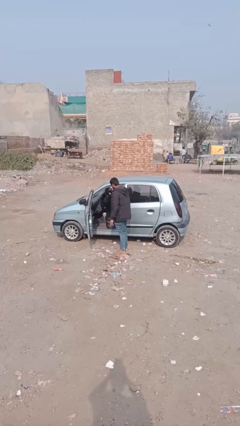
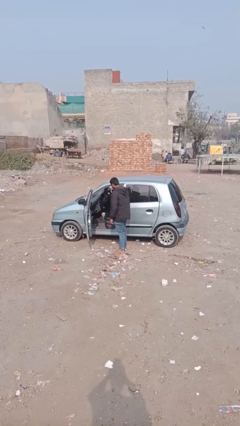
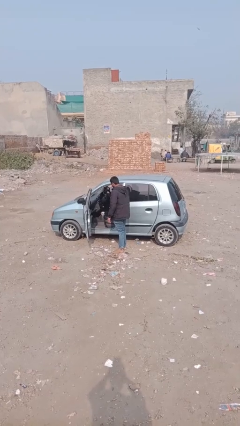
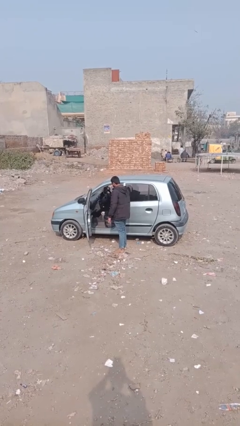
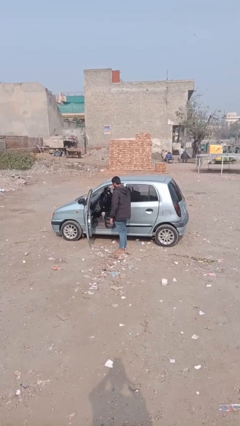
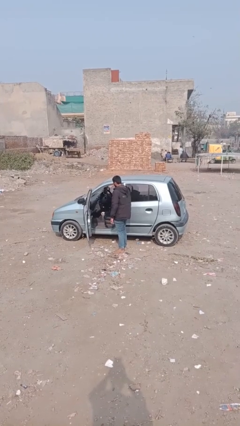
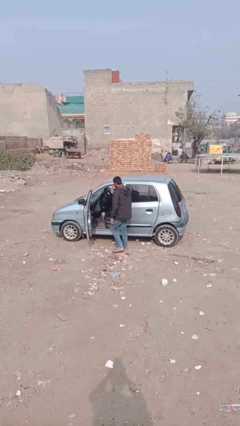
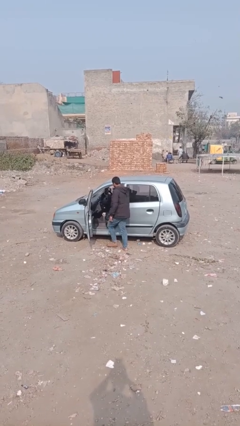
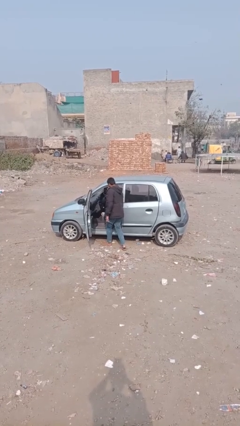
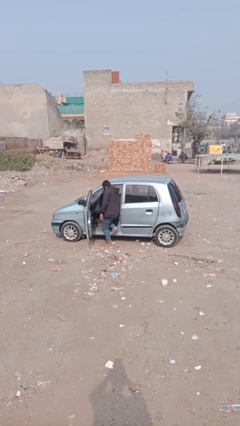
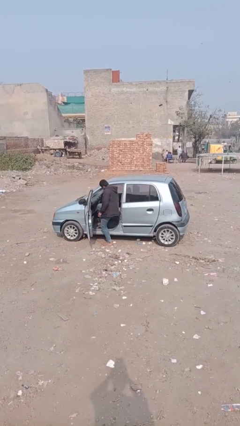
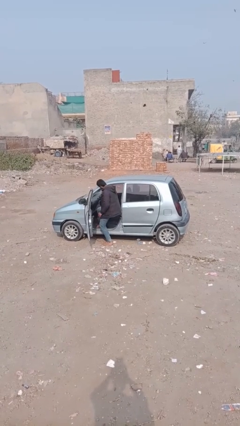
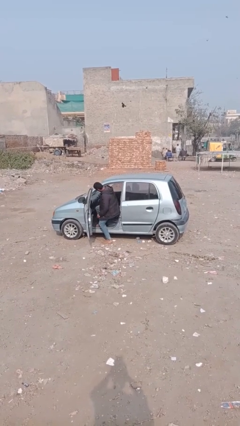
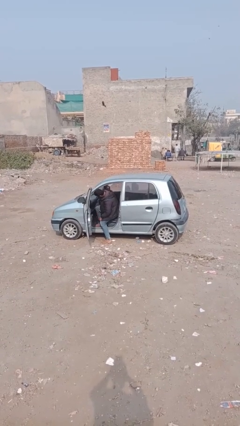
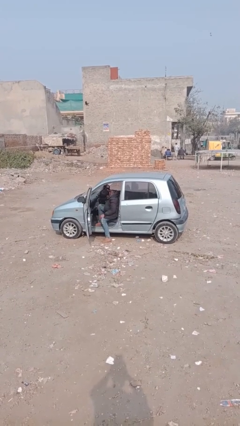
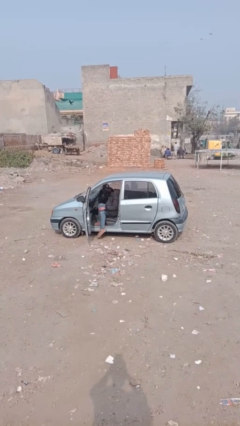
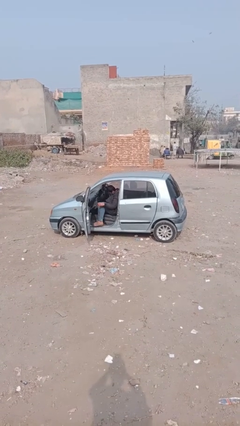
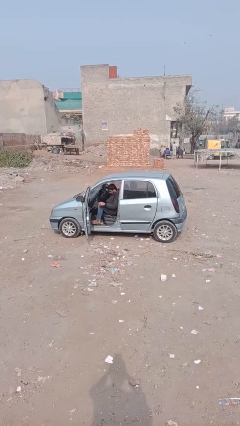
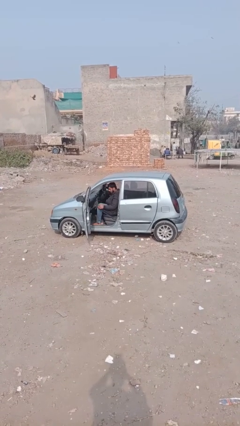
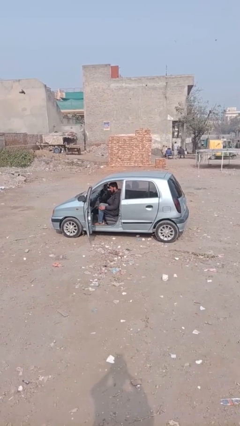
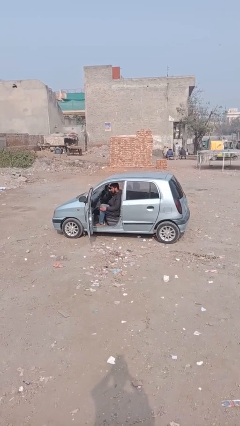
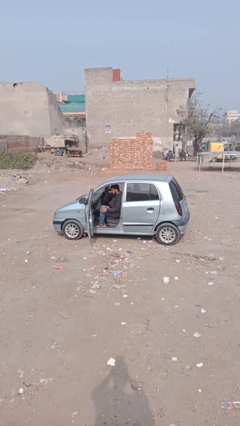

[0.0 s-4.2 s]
person enters car

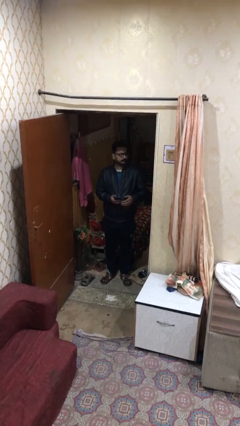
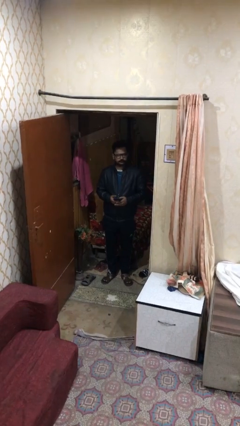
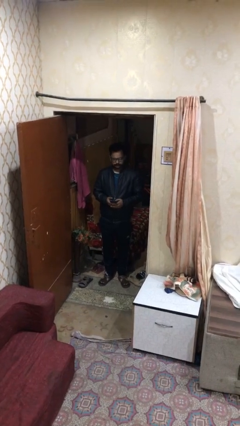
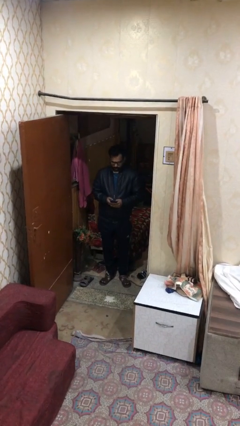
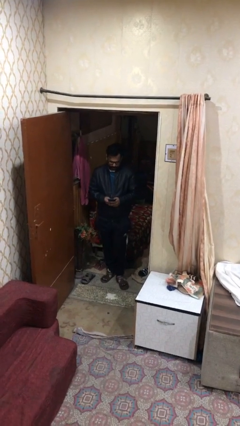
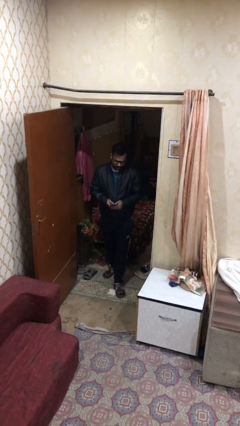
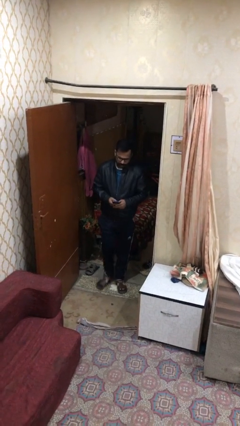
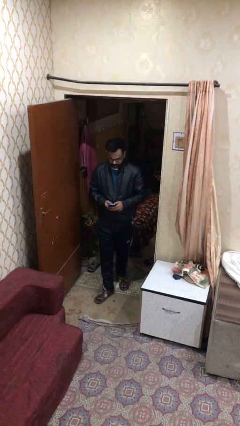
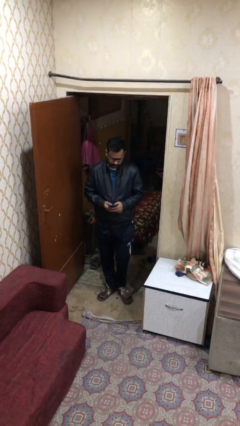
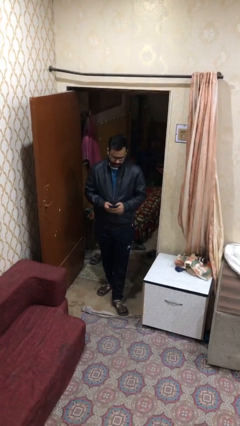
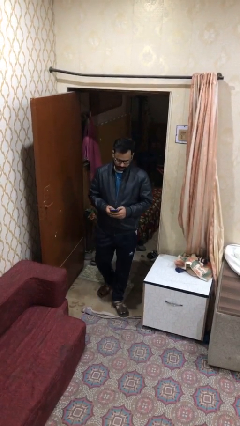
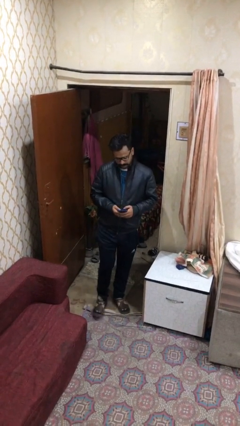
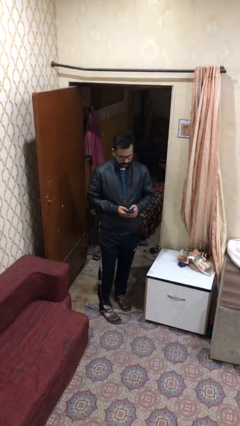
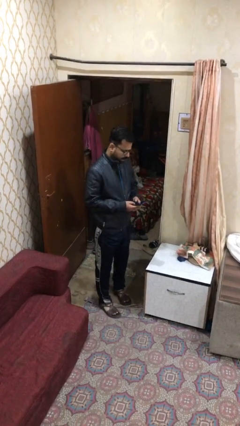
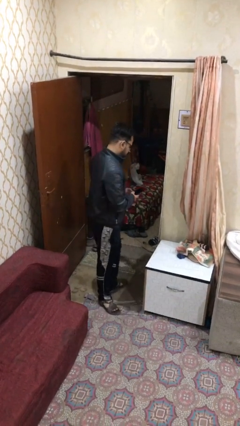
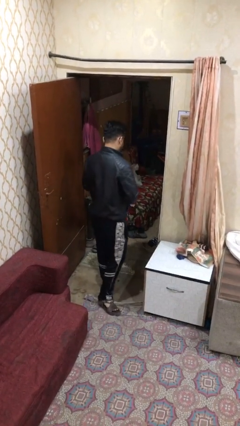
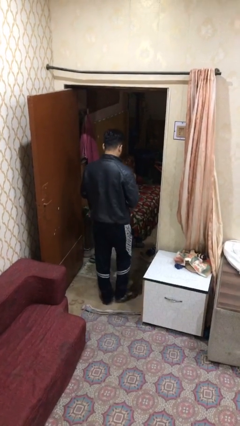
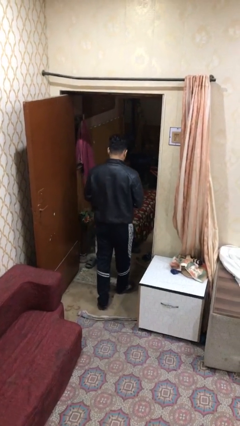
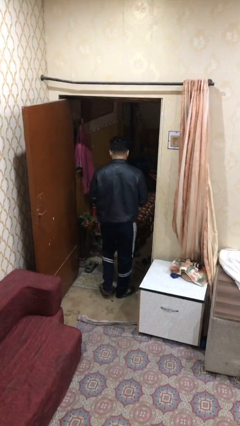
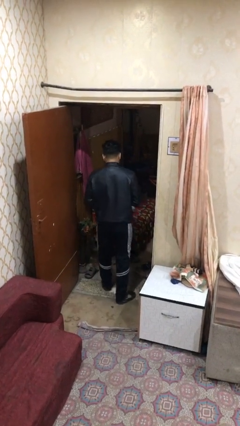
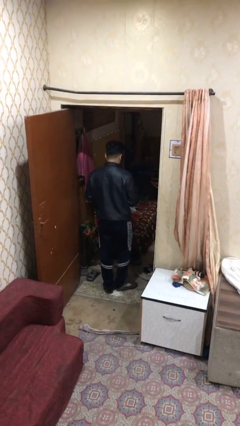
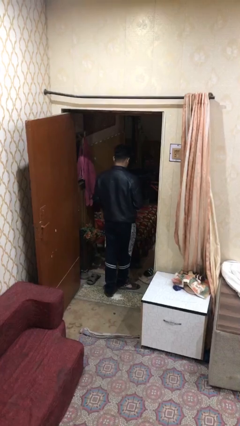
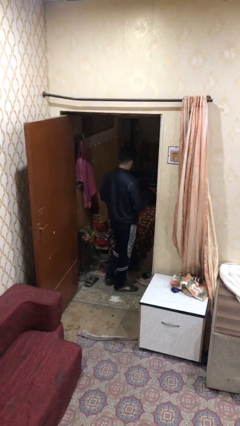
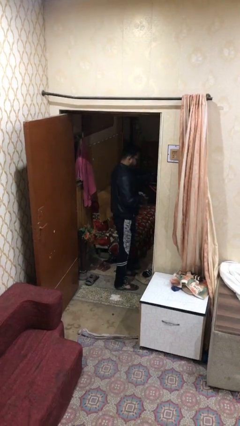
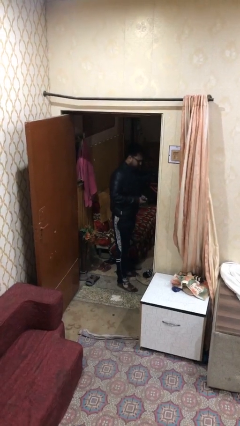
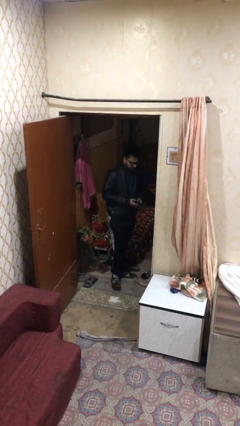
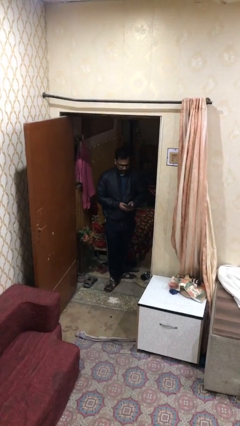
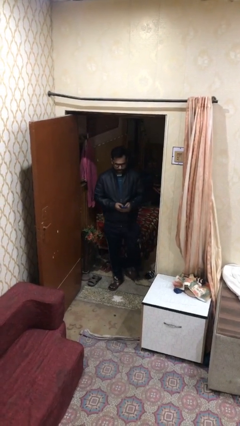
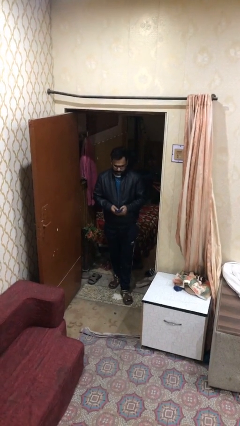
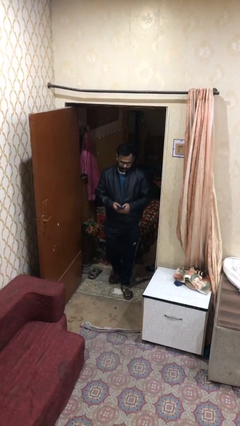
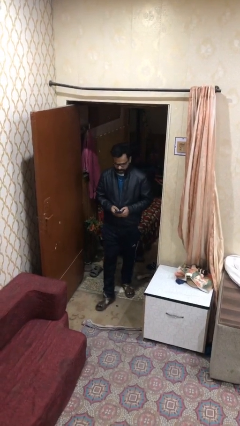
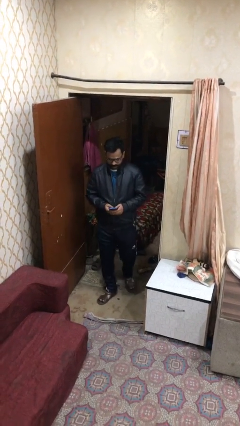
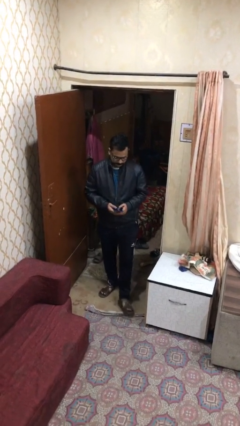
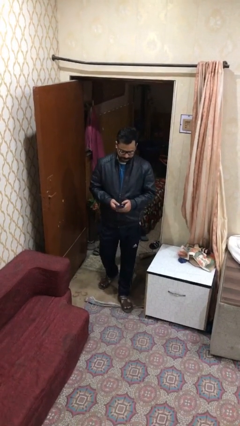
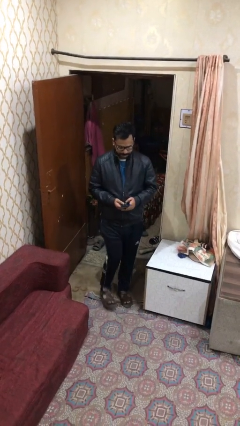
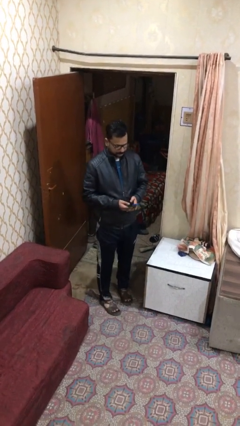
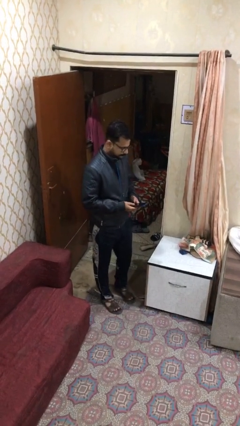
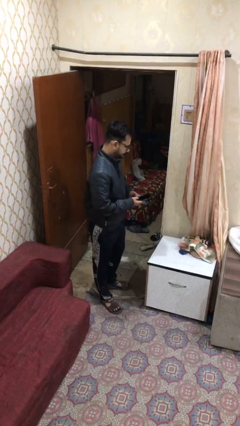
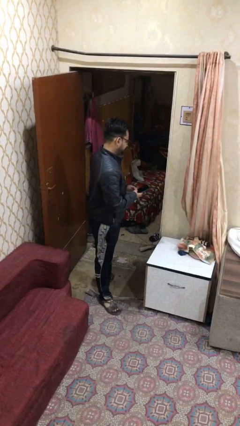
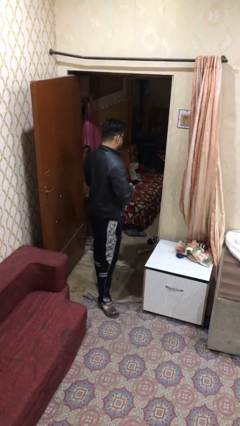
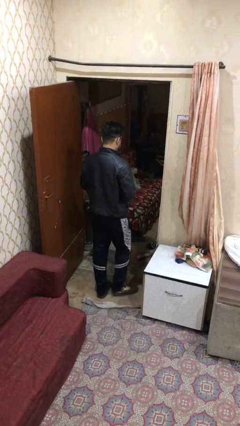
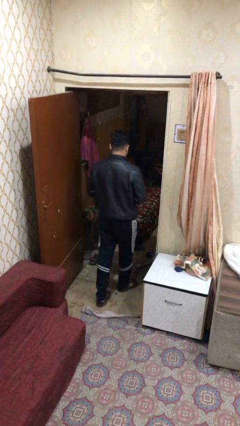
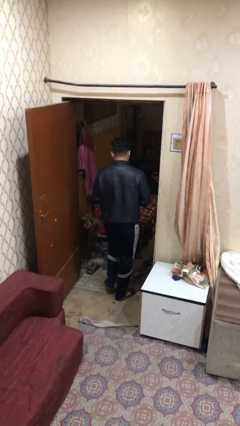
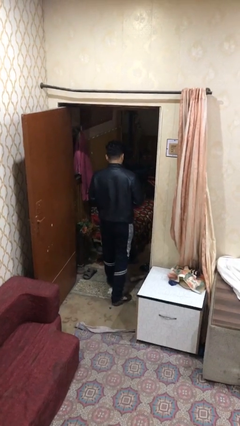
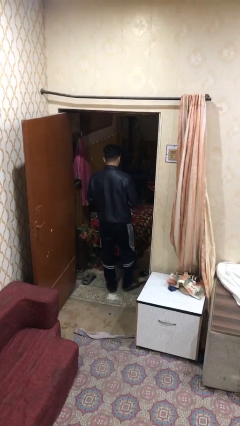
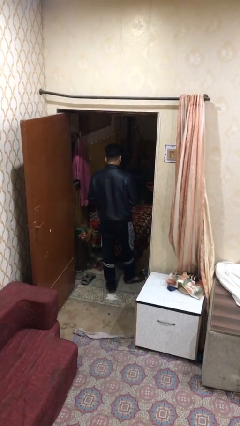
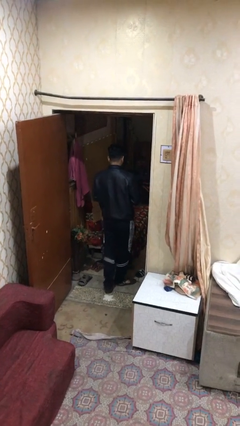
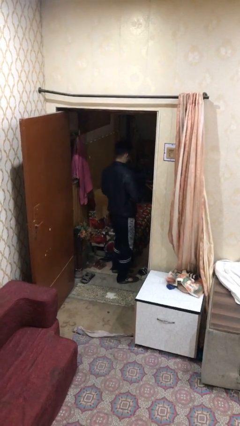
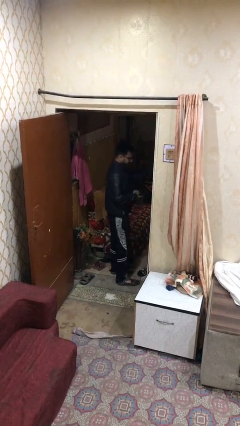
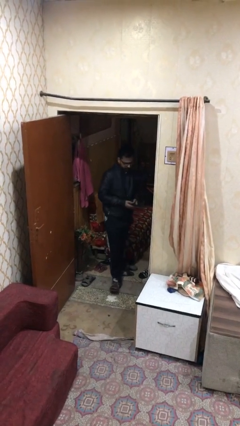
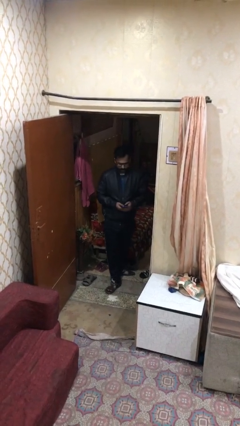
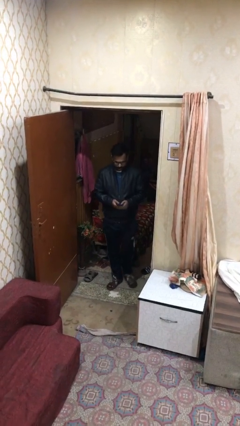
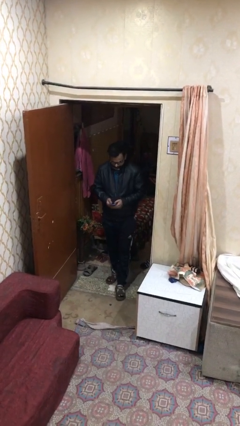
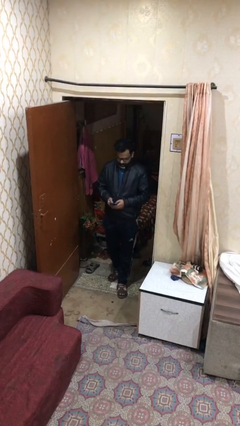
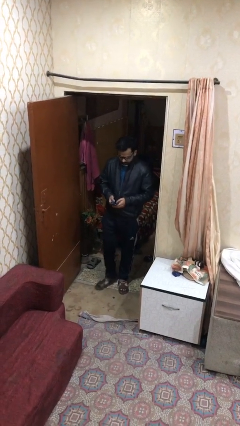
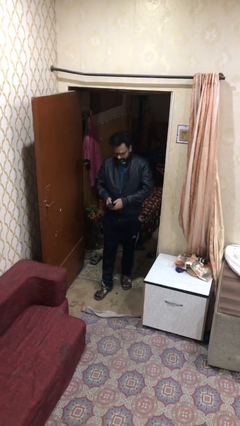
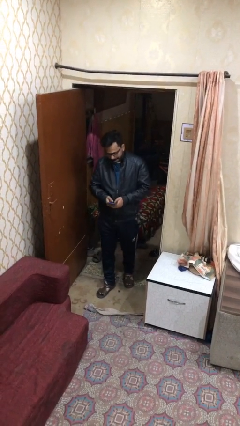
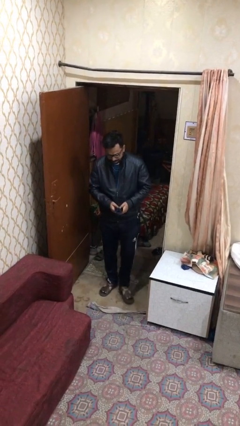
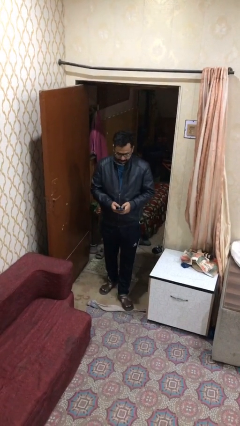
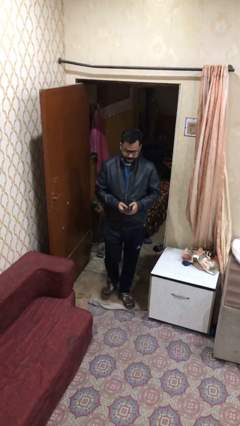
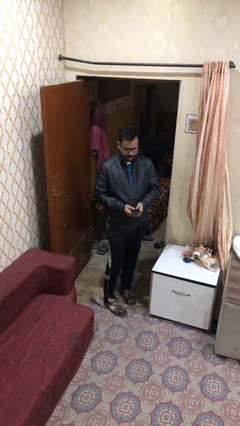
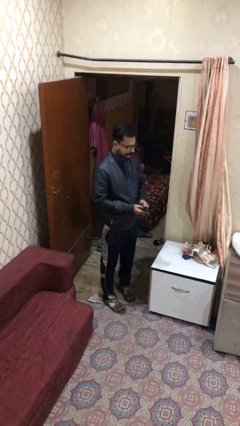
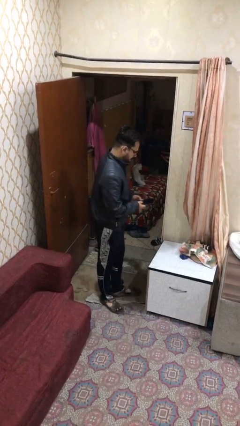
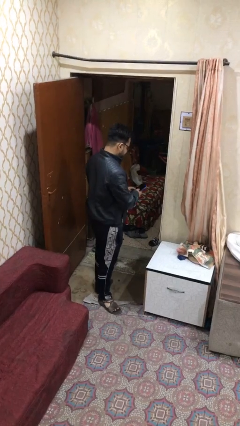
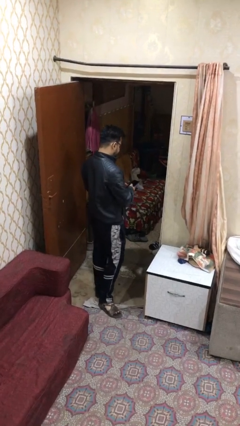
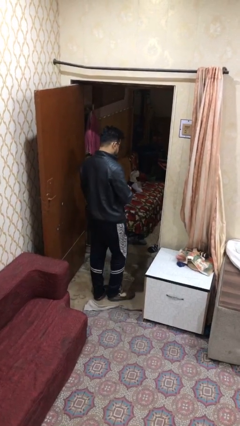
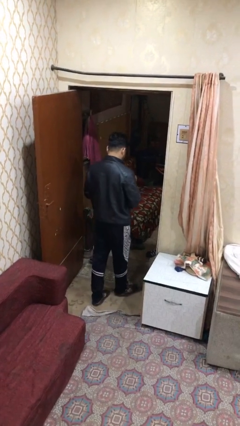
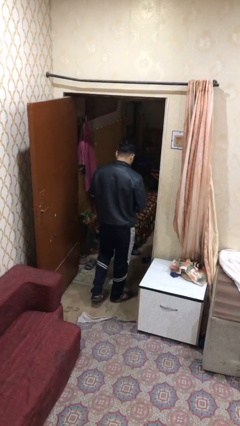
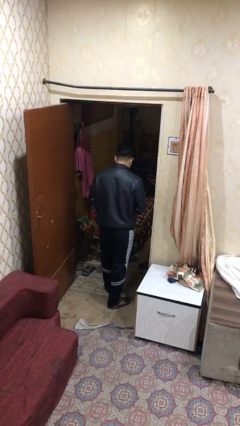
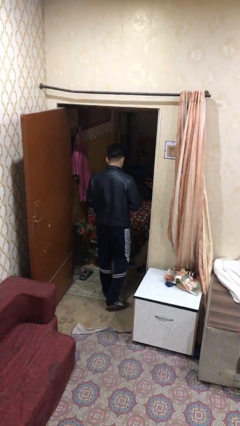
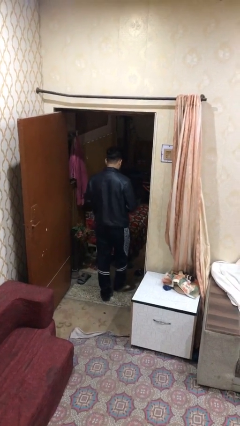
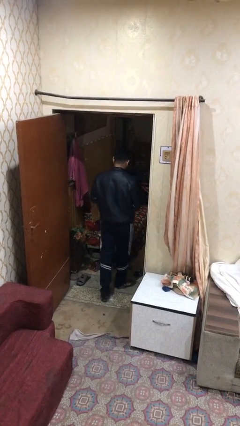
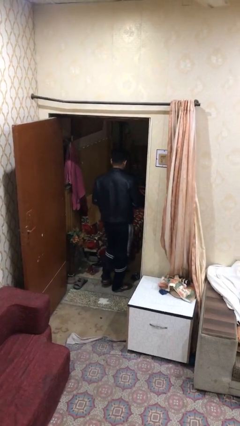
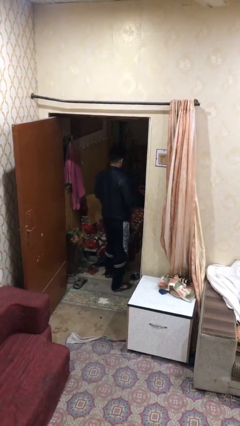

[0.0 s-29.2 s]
person texts on phone
